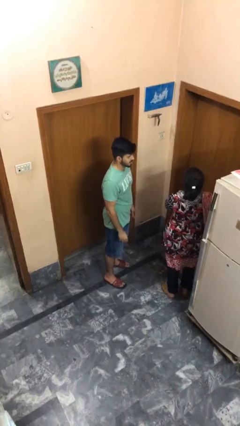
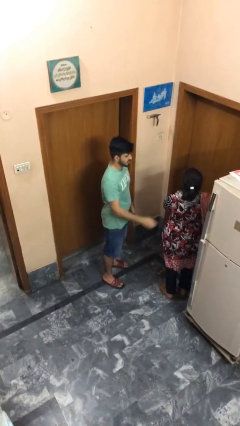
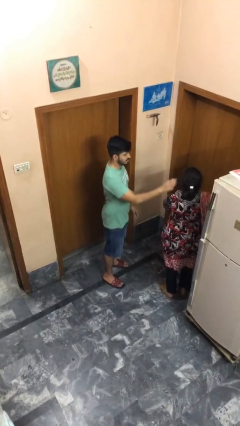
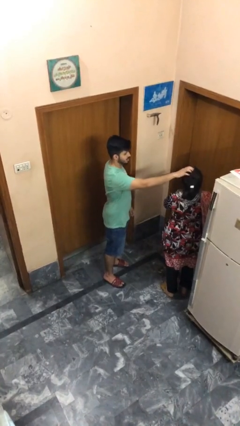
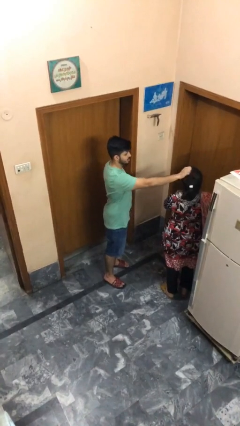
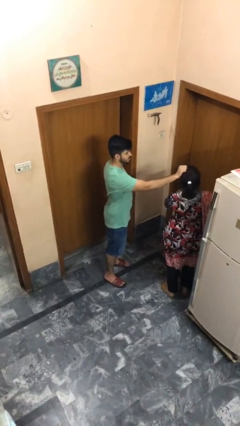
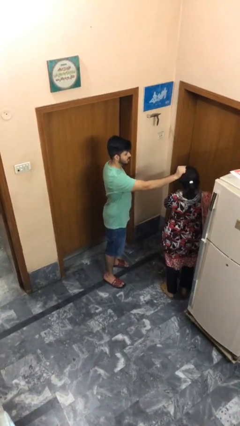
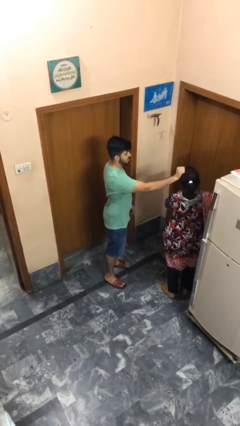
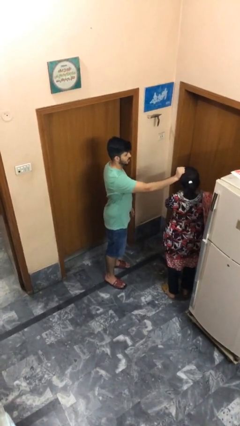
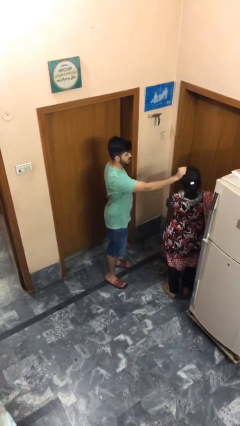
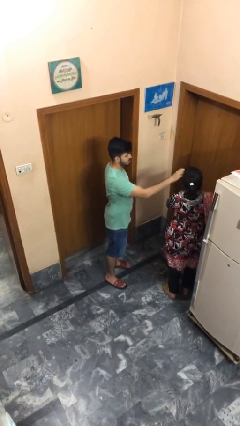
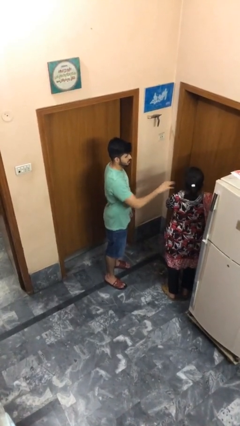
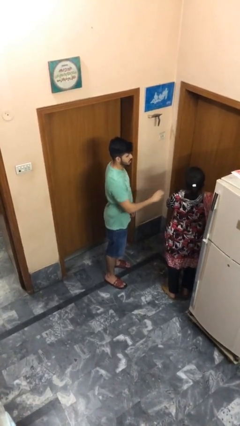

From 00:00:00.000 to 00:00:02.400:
person grabs person by hair

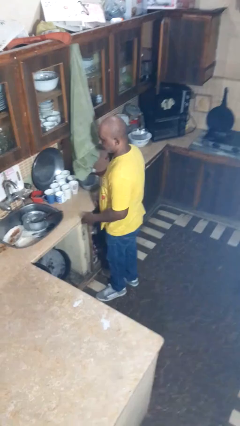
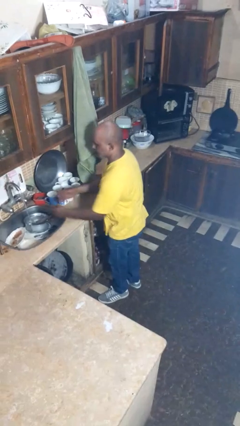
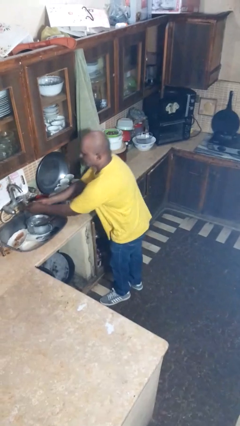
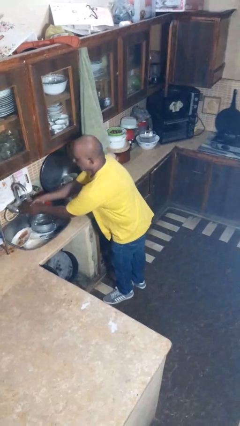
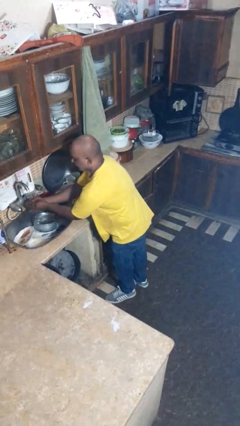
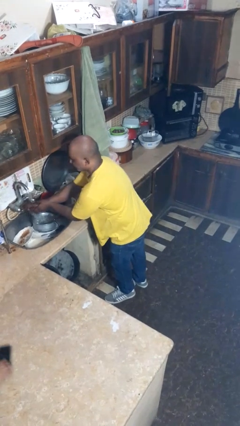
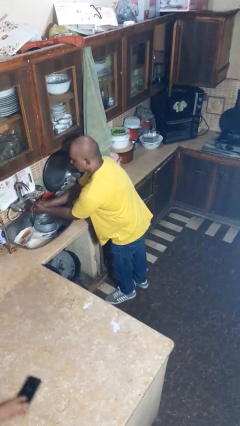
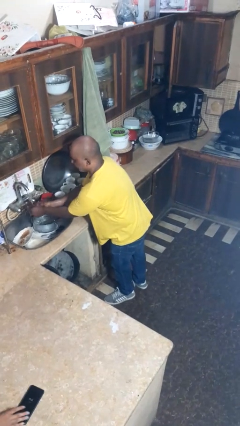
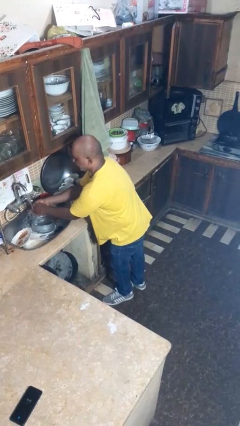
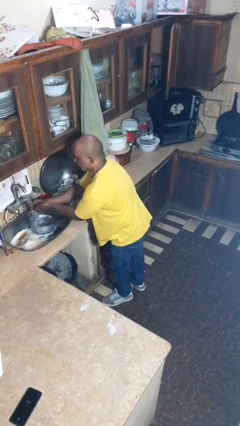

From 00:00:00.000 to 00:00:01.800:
person washes hands

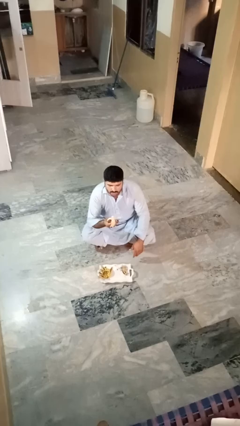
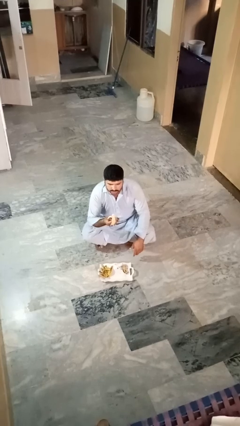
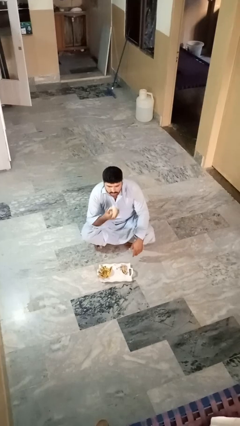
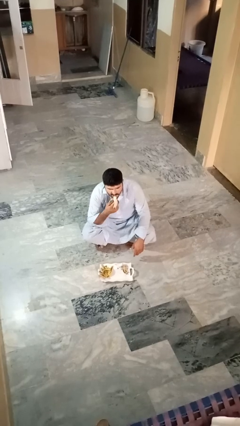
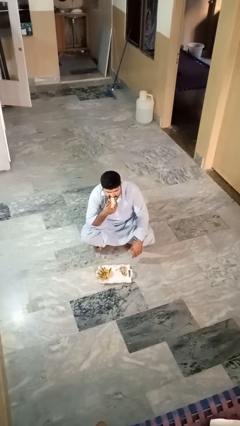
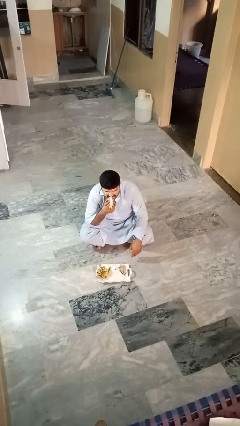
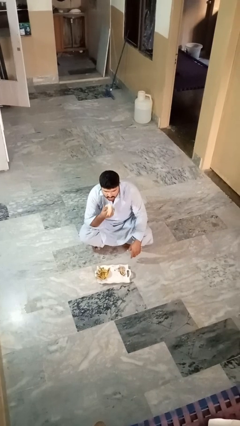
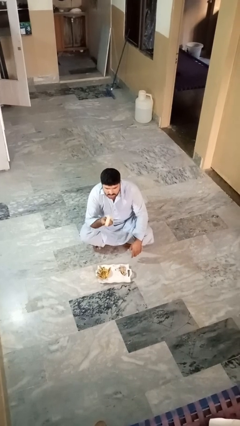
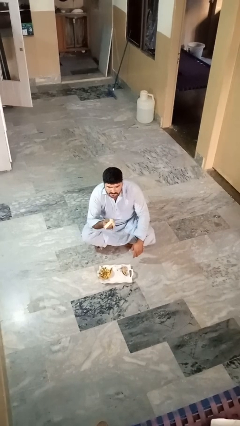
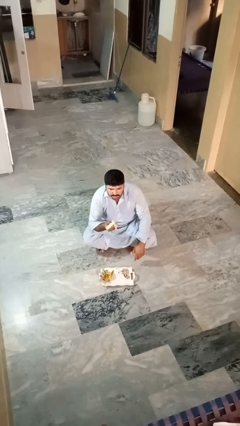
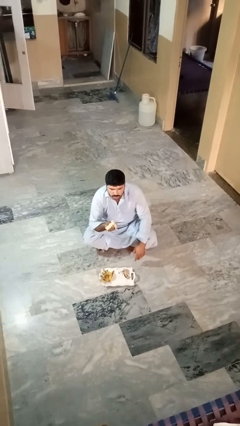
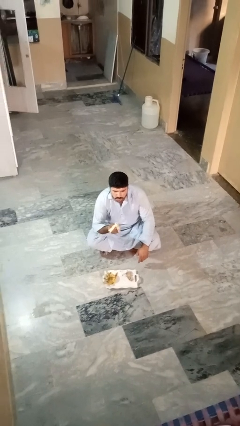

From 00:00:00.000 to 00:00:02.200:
person eats banana

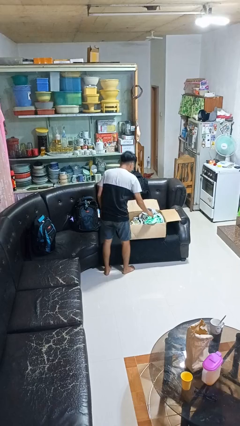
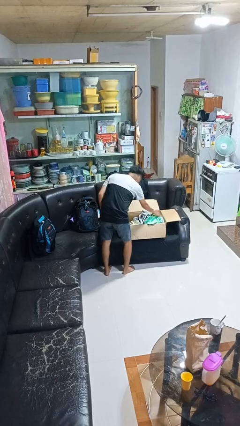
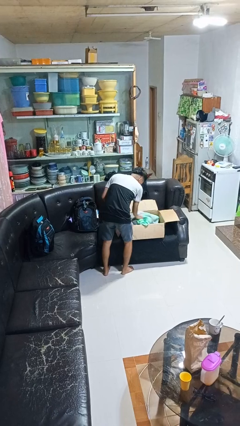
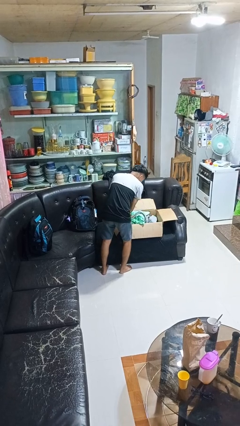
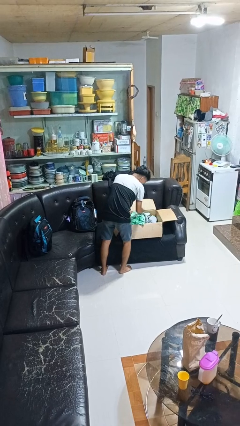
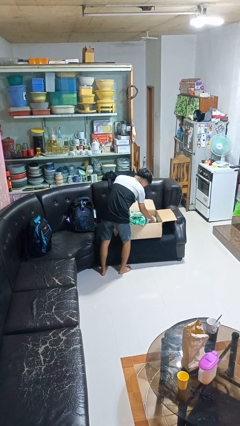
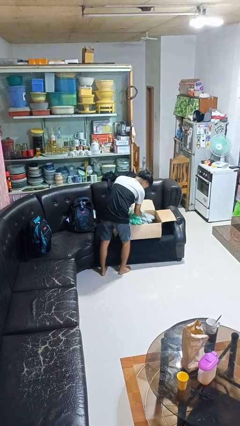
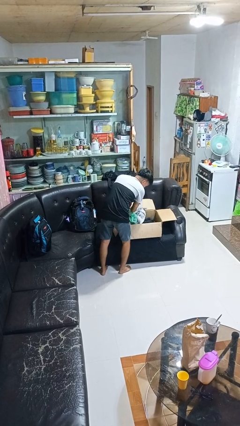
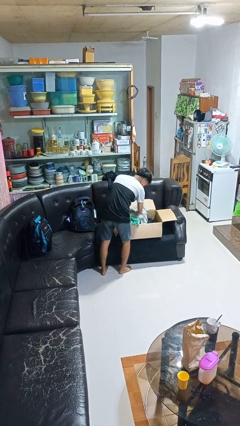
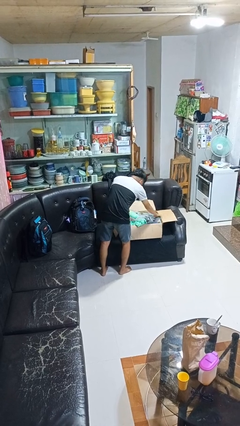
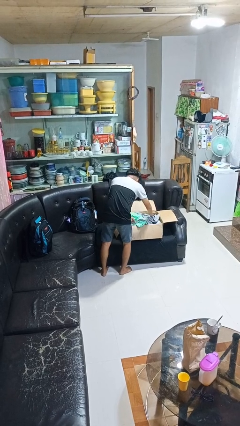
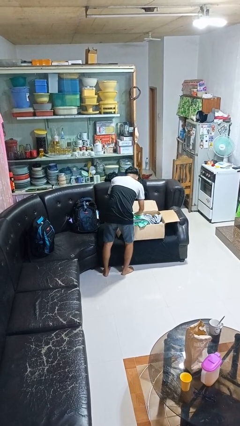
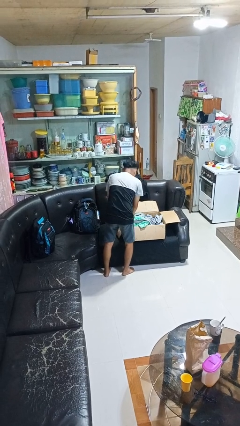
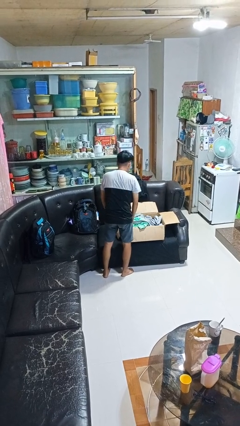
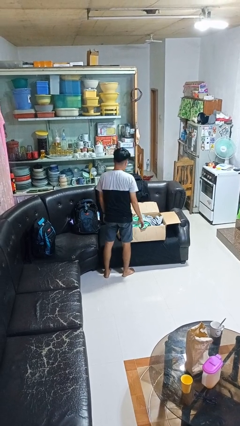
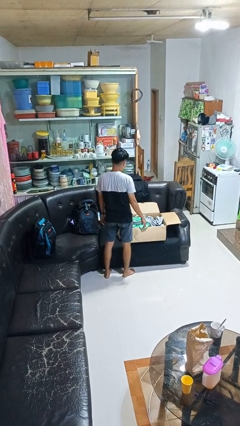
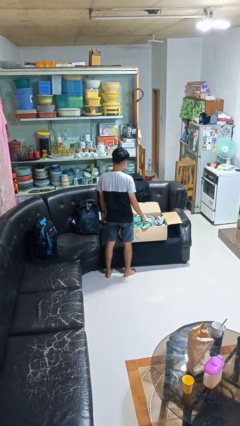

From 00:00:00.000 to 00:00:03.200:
person searches in box

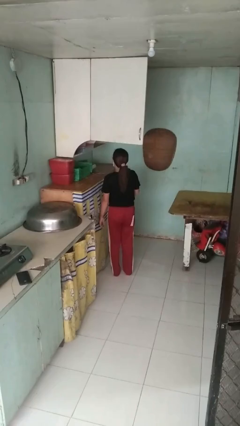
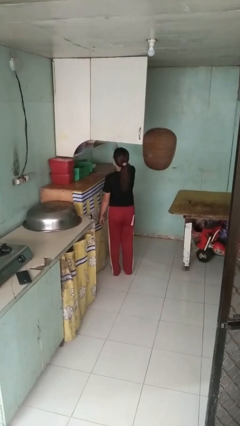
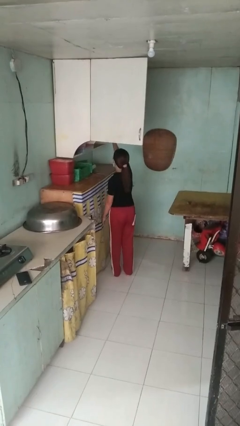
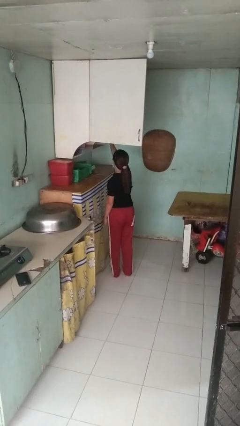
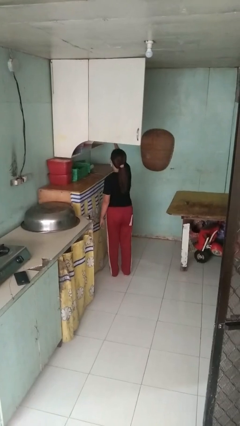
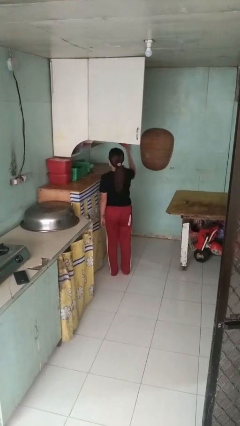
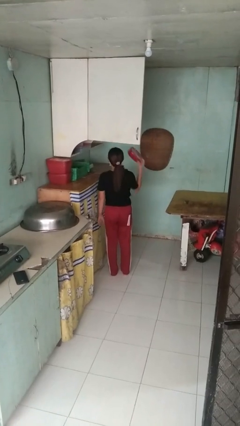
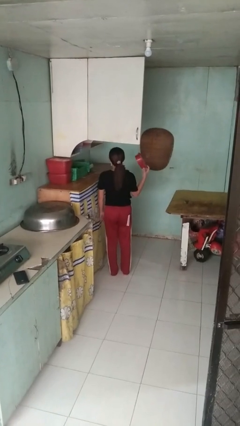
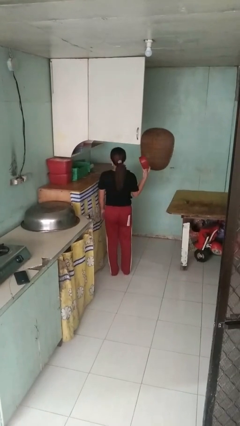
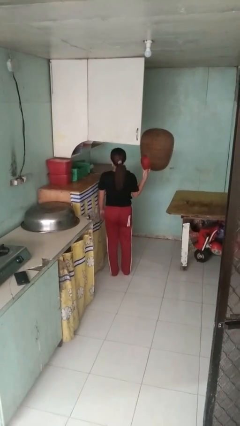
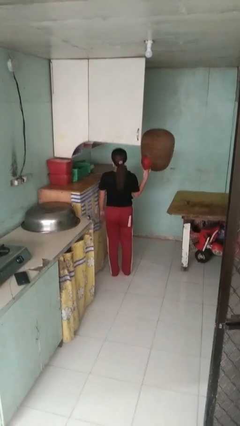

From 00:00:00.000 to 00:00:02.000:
person takes object from cabinet

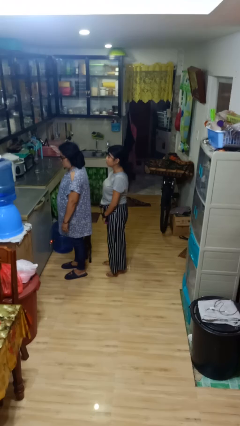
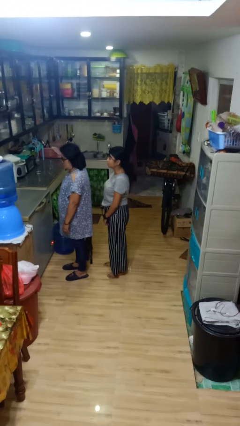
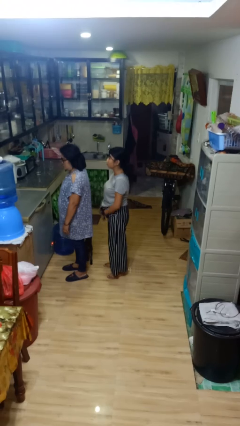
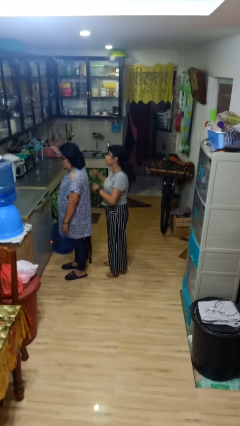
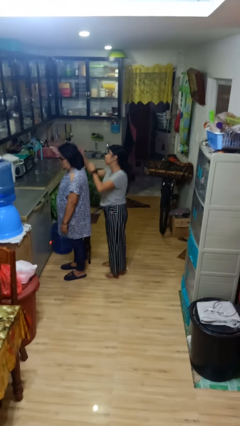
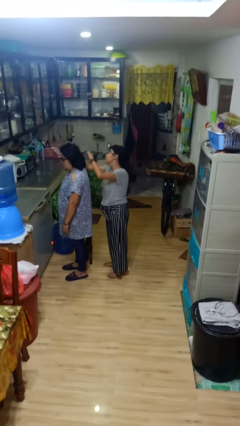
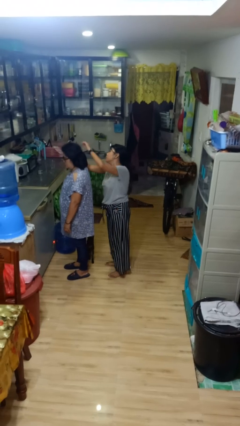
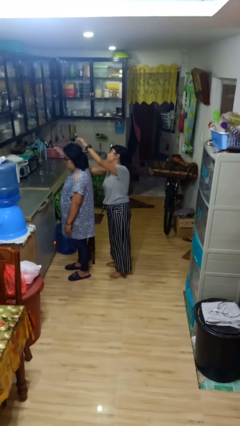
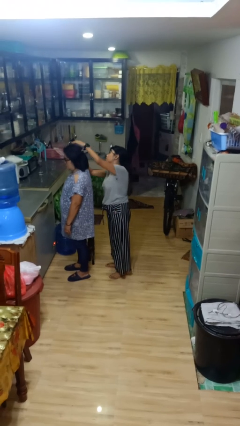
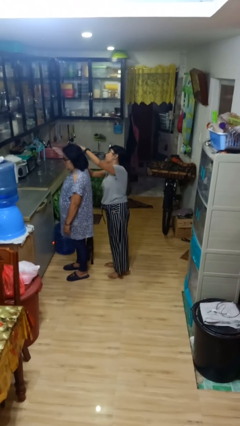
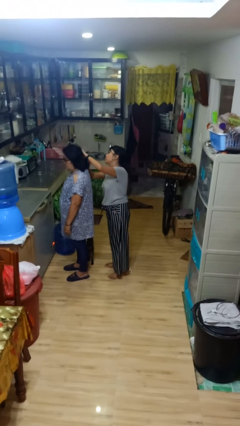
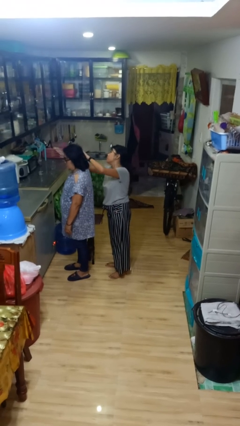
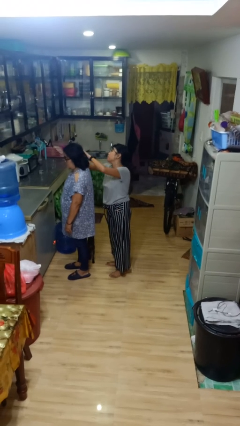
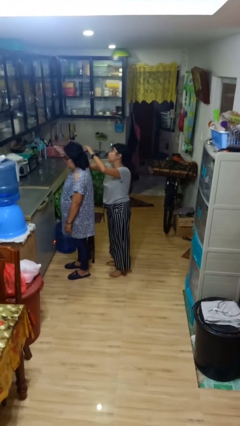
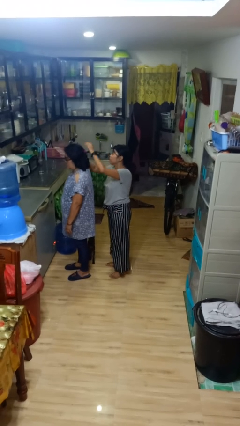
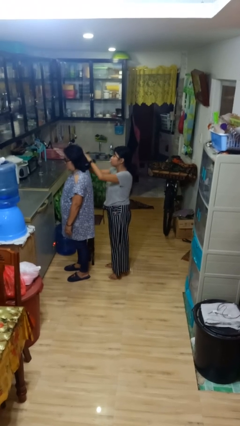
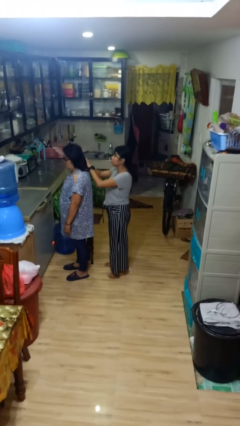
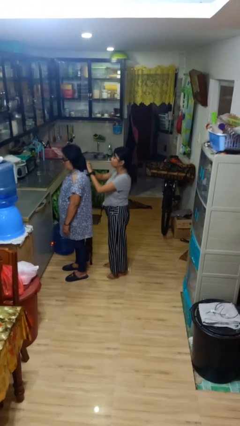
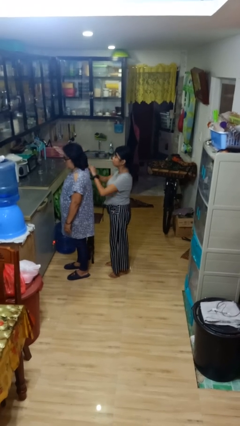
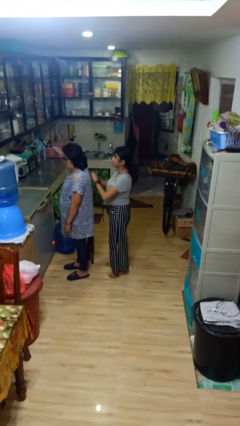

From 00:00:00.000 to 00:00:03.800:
person brushes hair of person

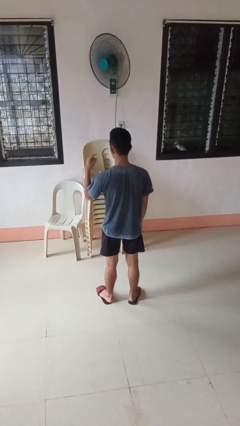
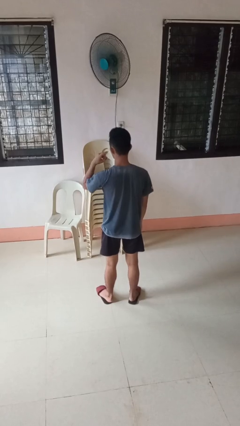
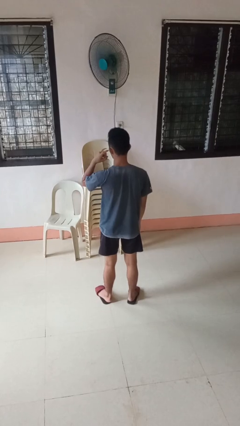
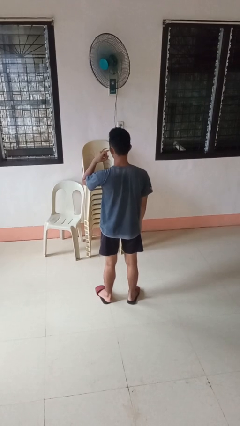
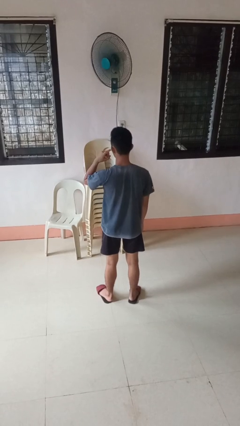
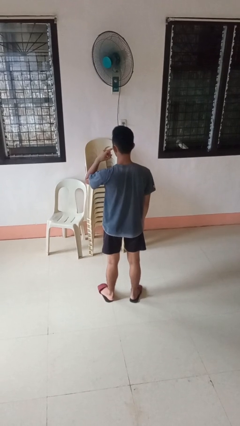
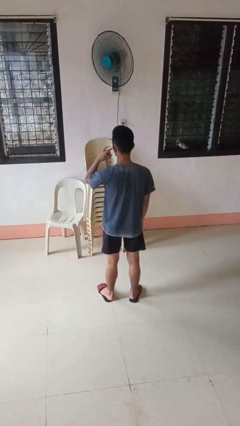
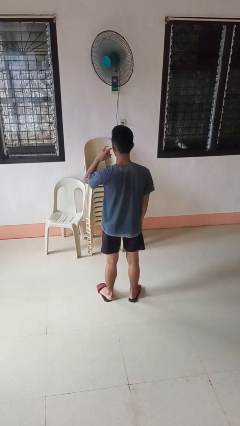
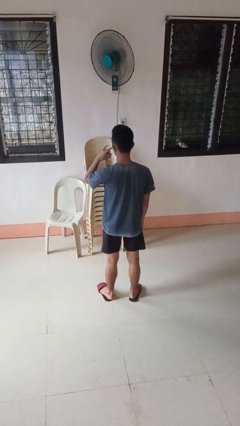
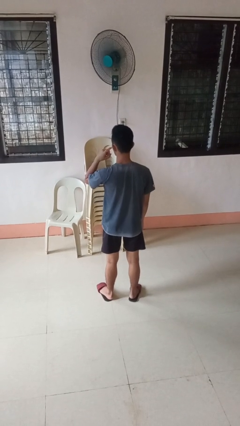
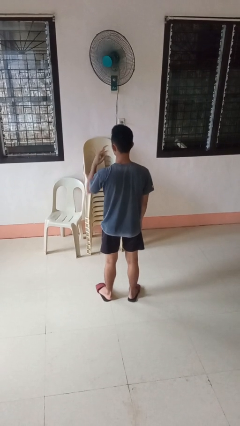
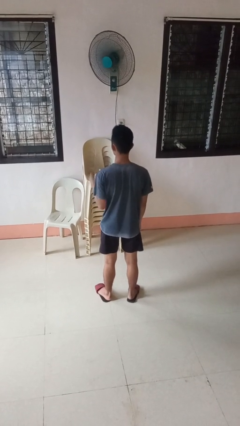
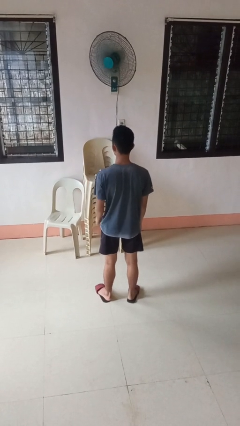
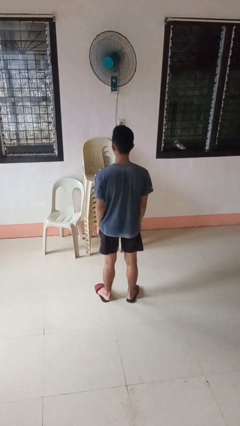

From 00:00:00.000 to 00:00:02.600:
person gestures listen closely
